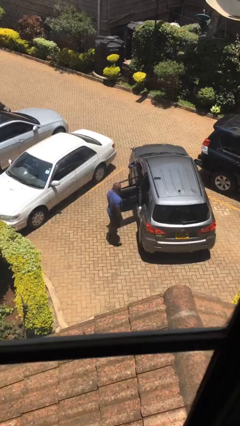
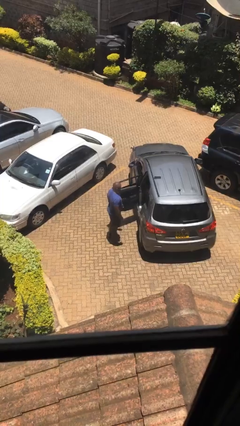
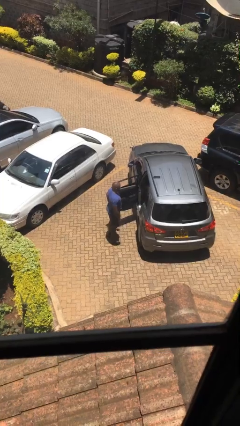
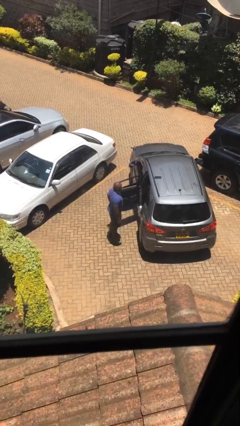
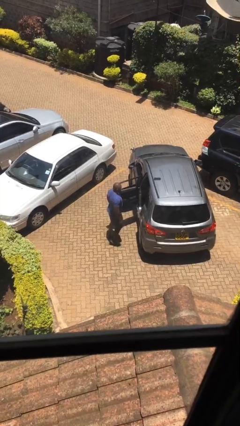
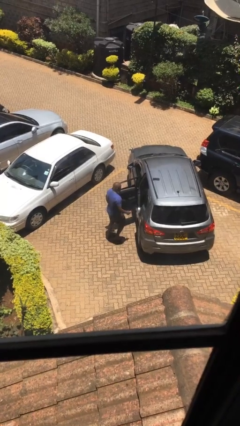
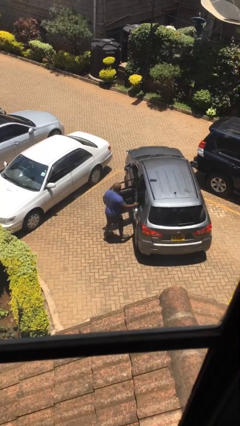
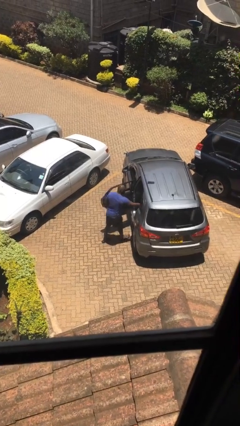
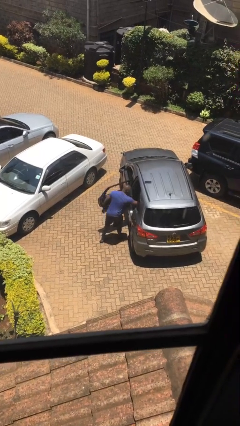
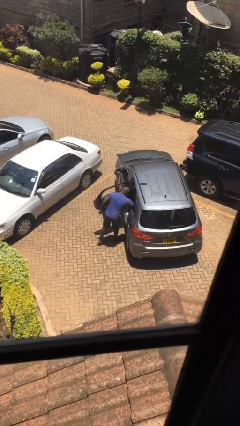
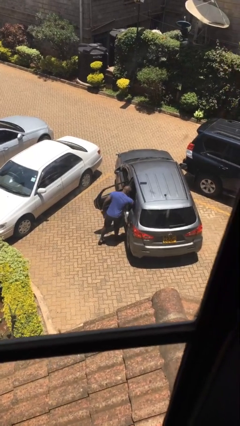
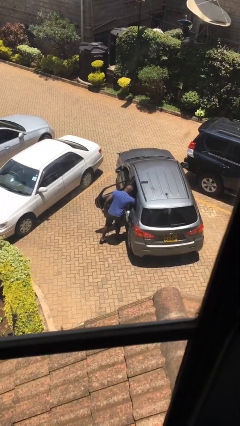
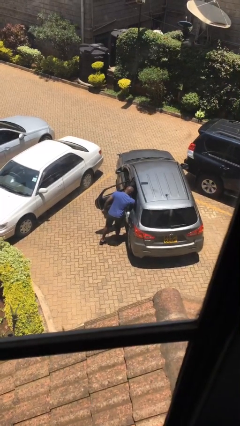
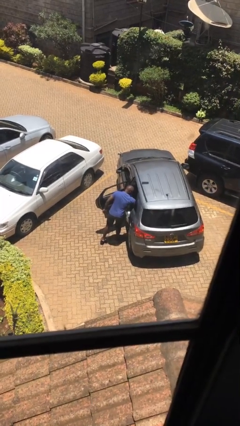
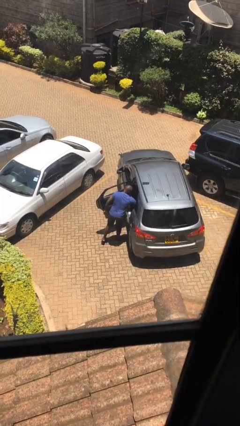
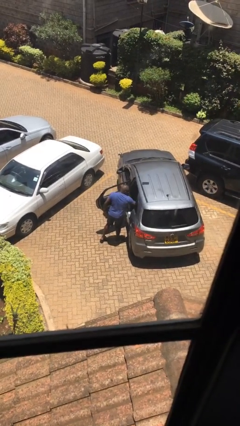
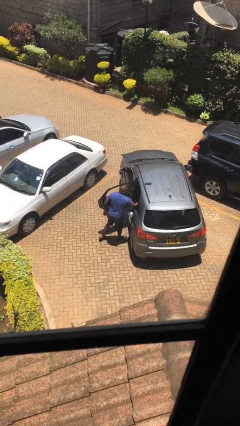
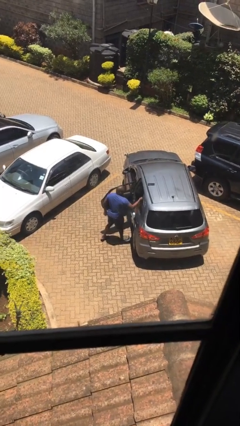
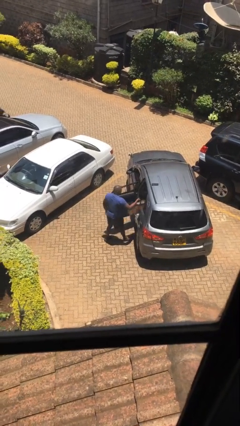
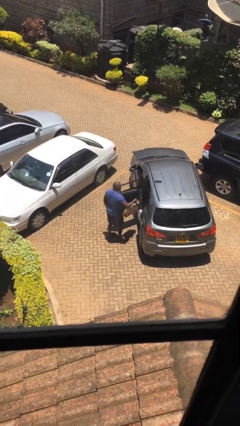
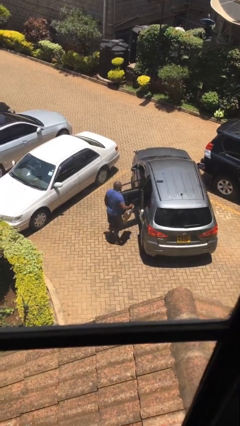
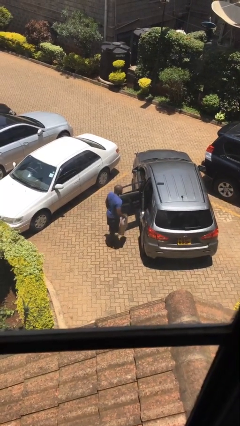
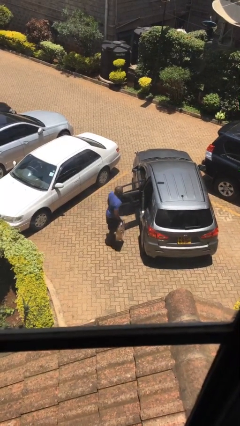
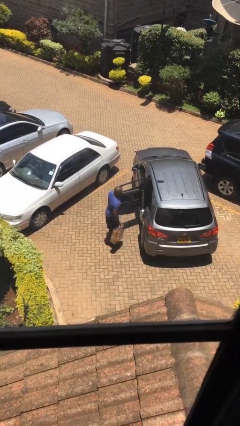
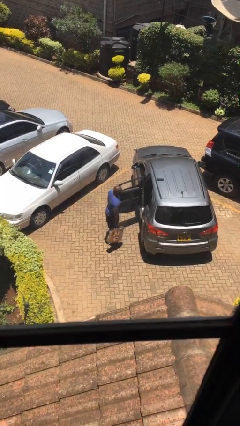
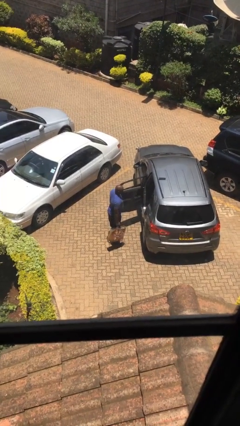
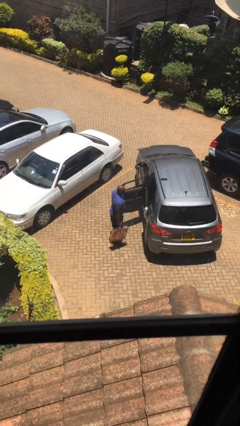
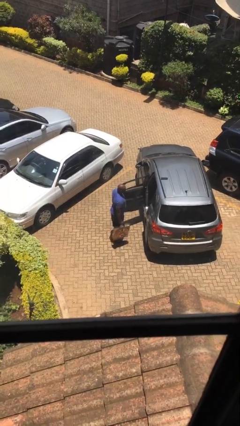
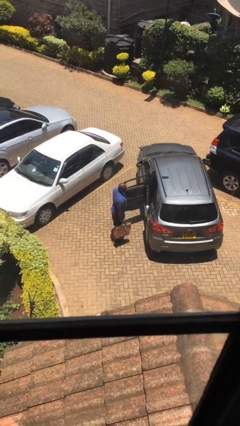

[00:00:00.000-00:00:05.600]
person unloads car

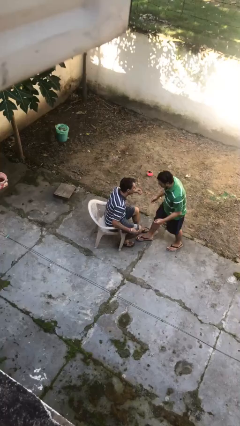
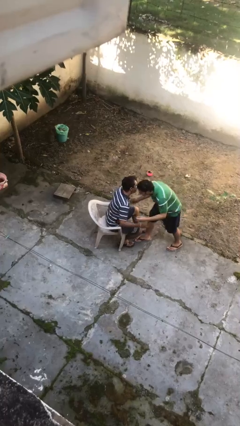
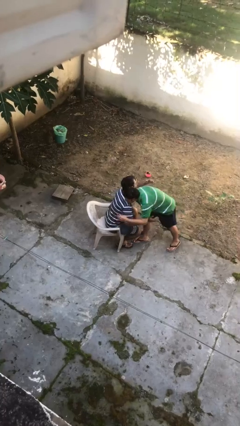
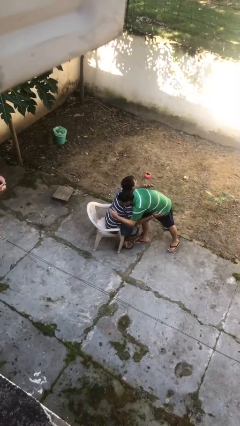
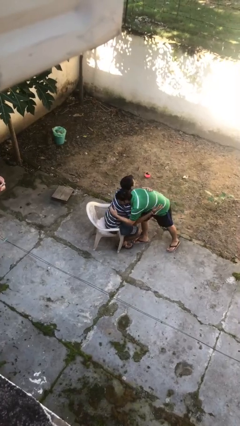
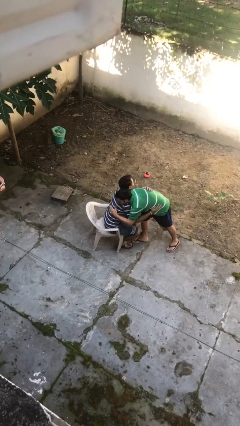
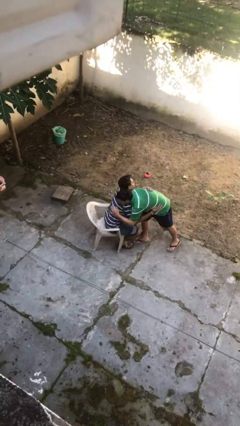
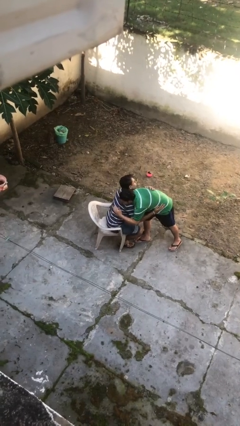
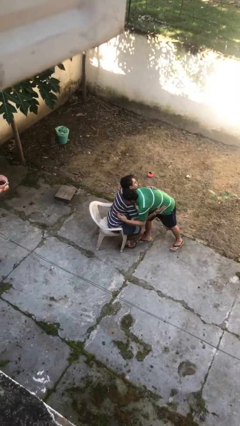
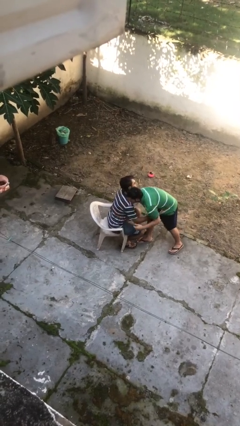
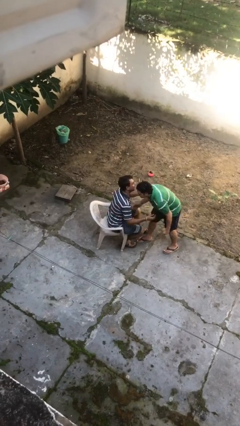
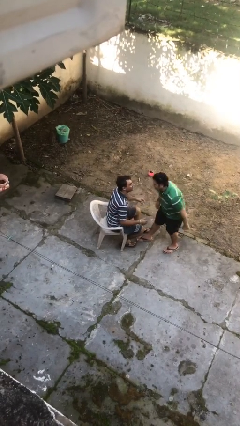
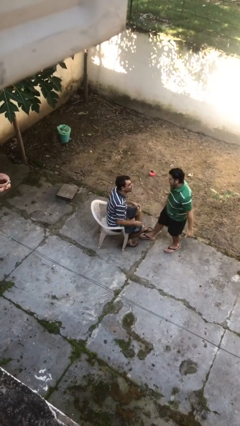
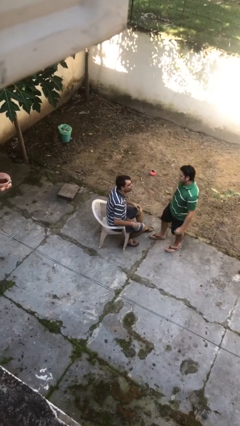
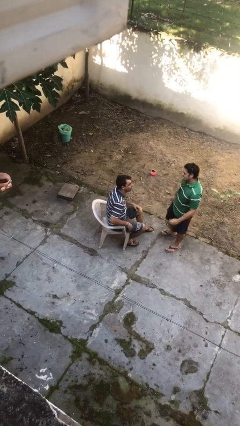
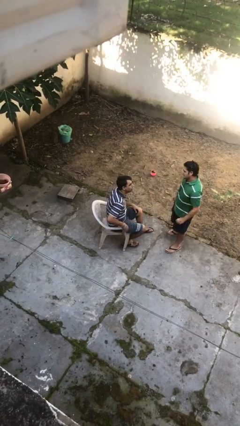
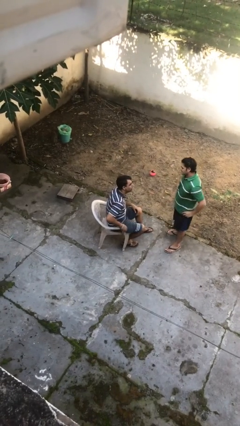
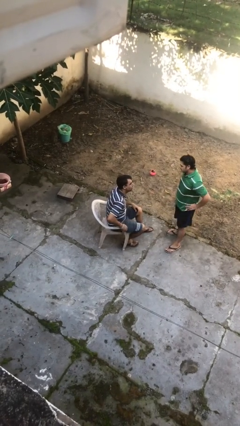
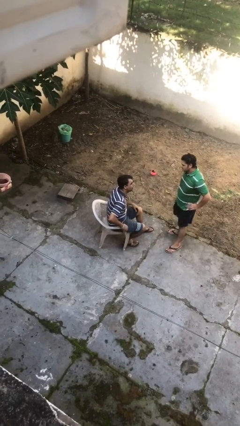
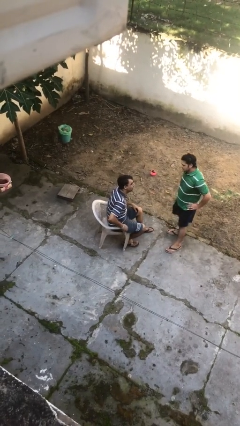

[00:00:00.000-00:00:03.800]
person embraces person

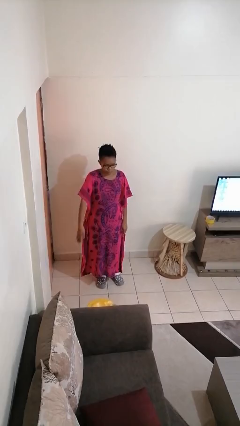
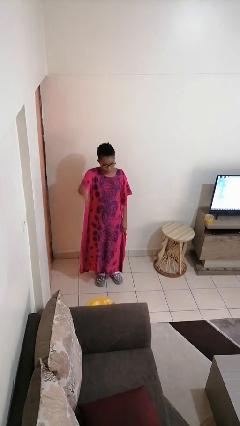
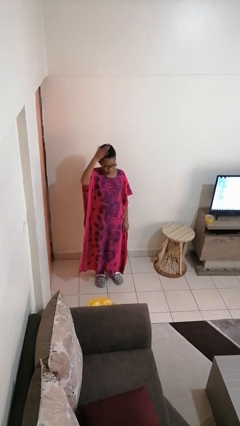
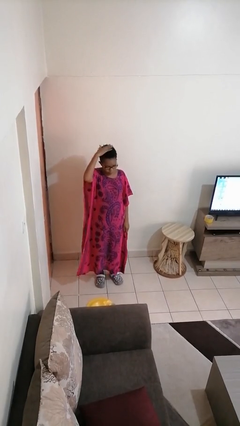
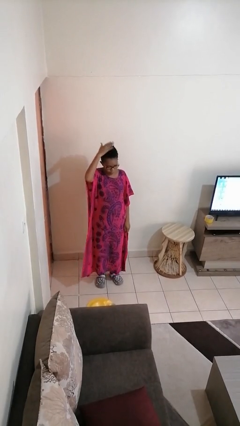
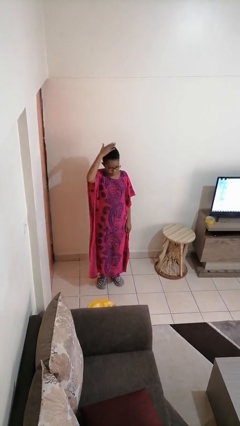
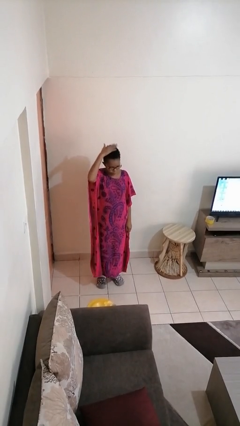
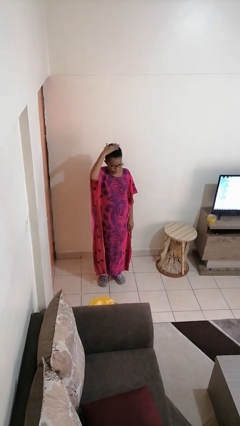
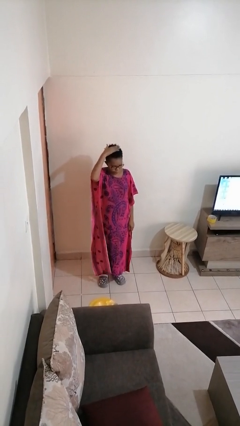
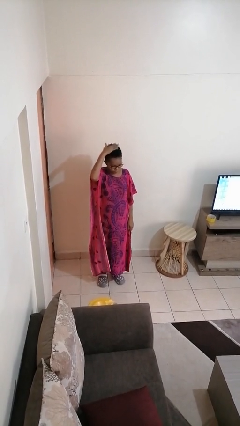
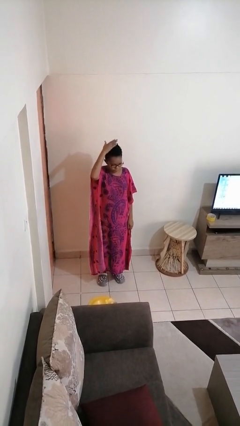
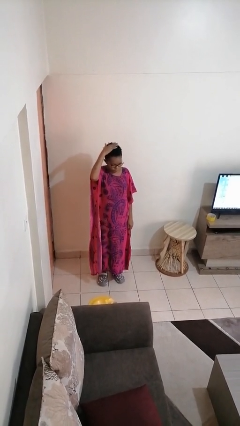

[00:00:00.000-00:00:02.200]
person pats head

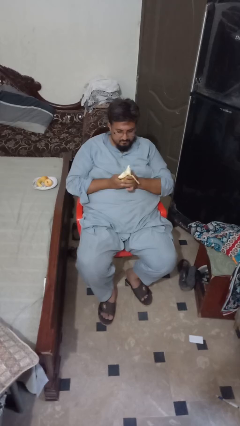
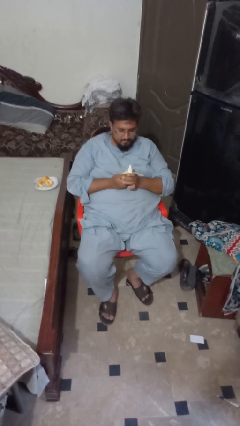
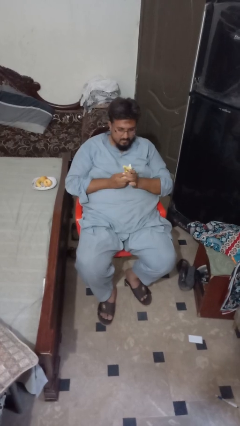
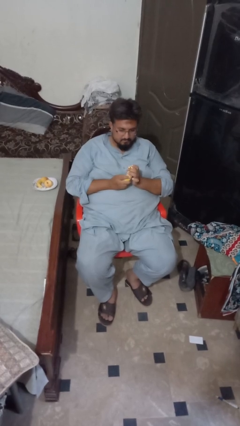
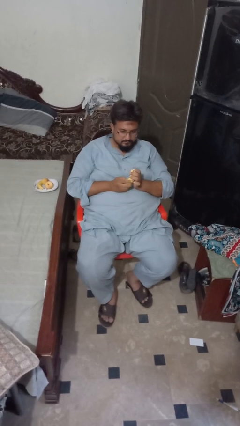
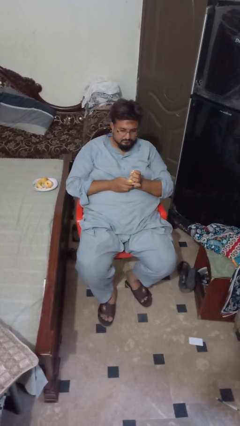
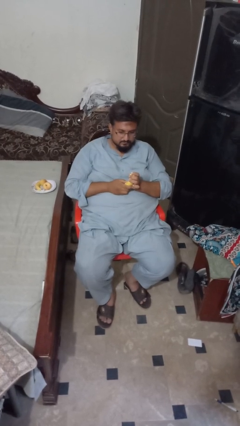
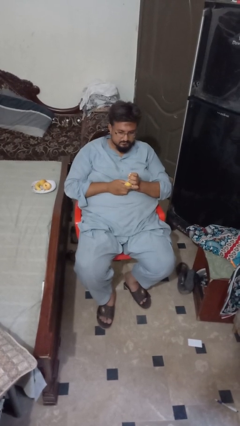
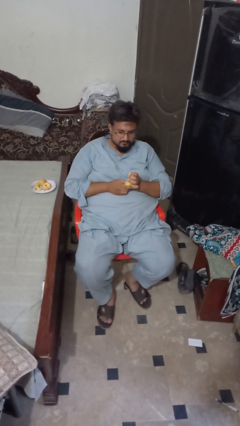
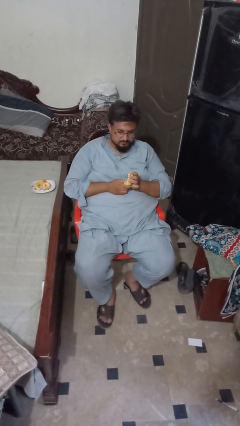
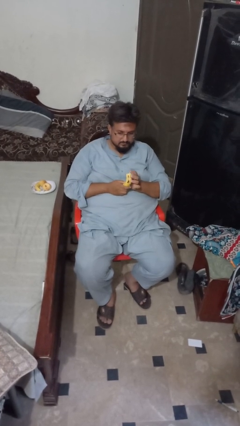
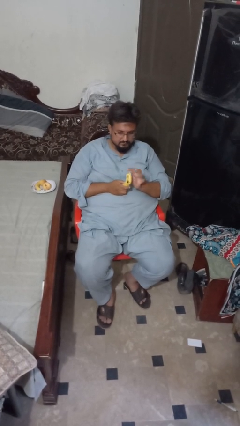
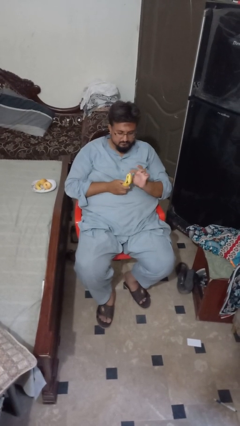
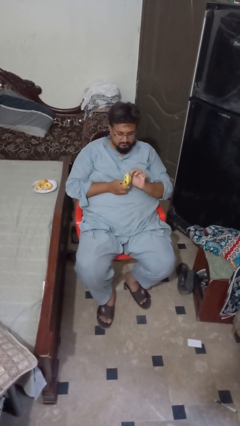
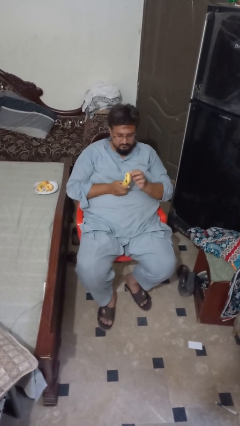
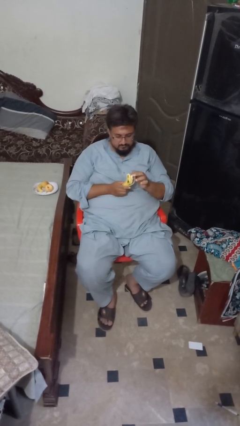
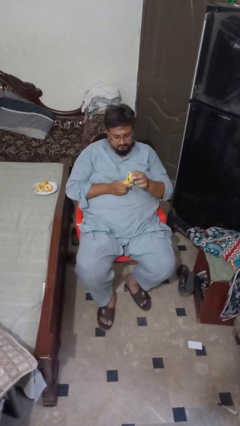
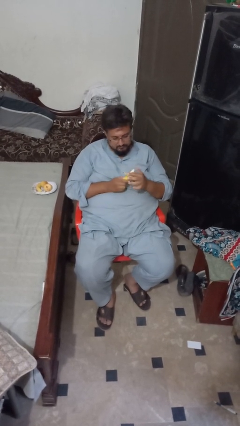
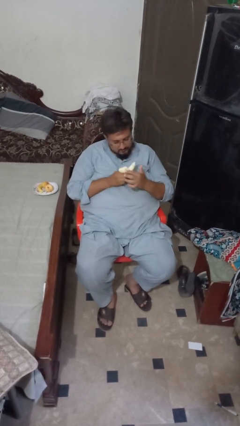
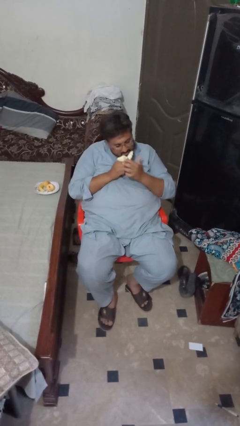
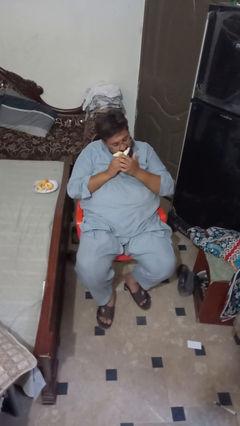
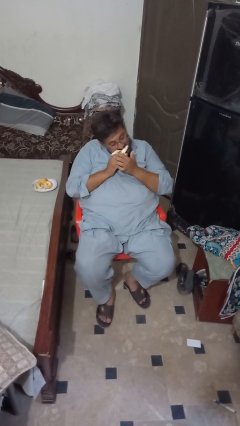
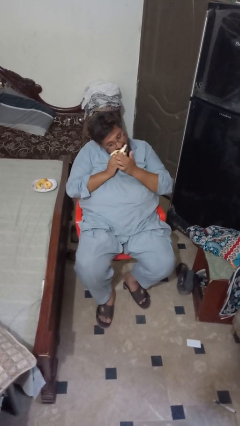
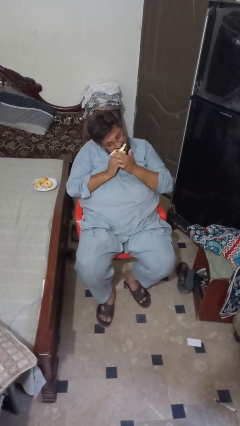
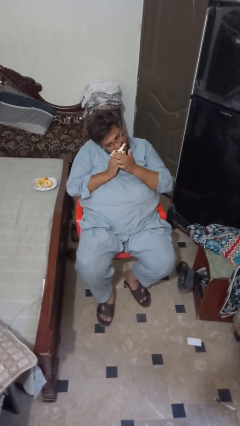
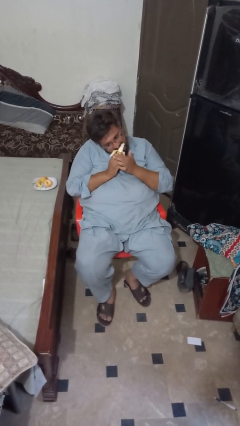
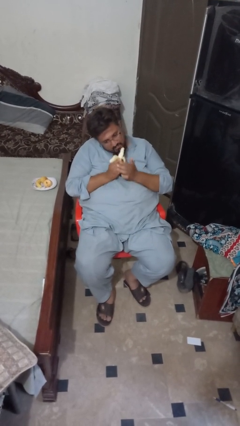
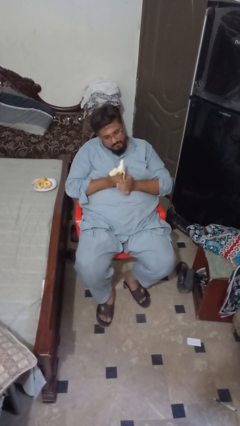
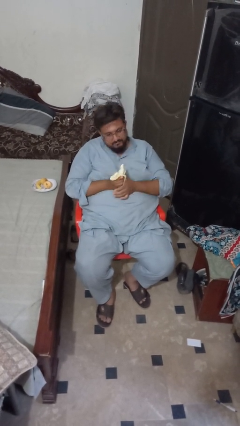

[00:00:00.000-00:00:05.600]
person eats banana

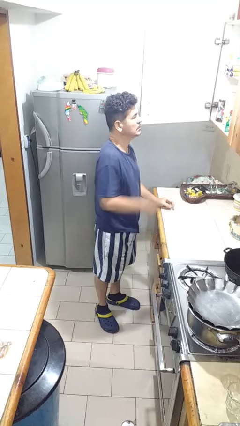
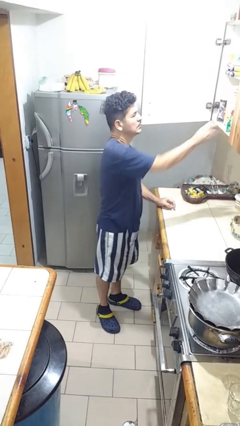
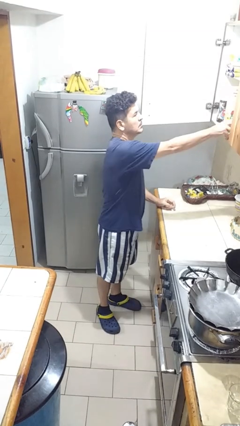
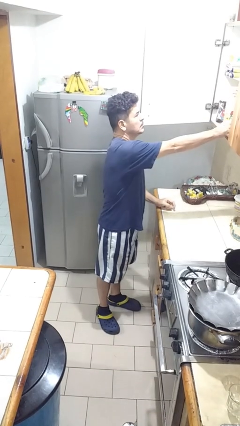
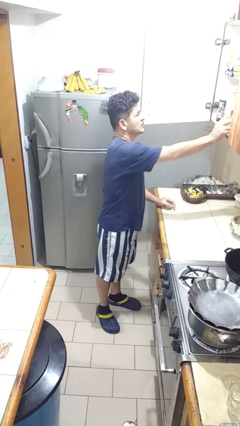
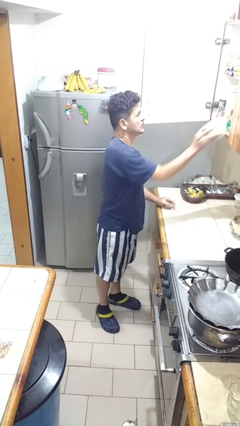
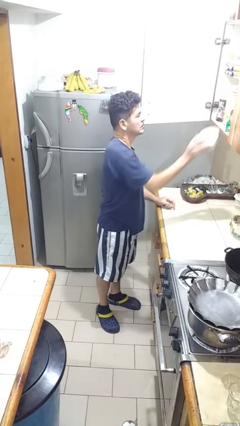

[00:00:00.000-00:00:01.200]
person takes object from cabinet
